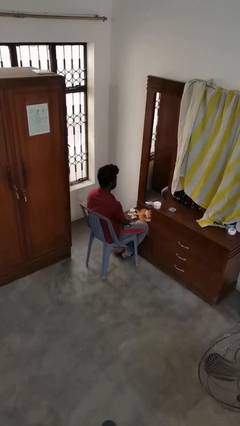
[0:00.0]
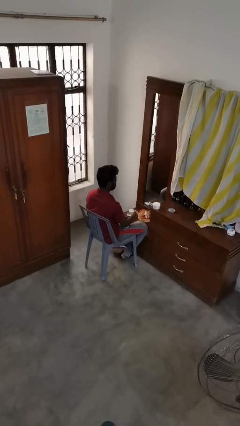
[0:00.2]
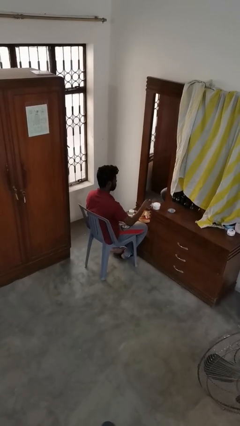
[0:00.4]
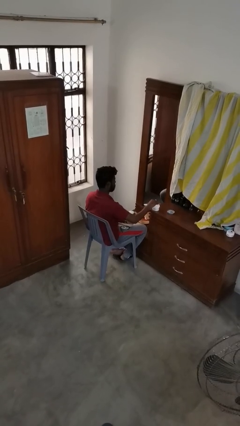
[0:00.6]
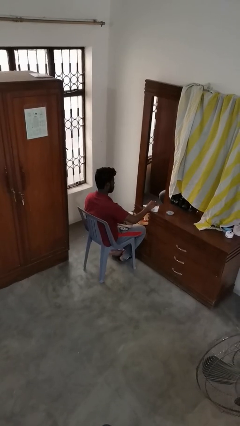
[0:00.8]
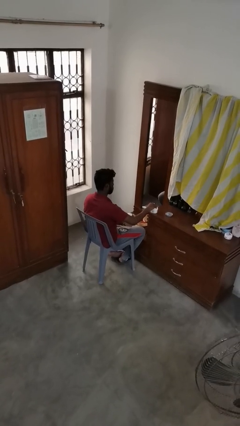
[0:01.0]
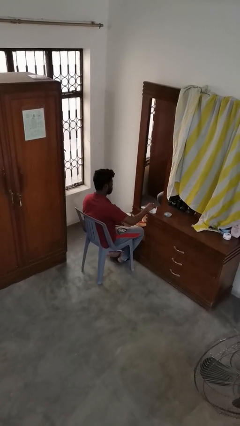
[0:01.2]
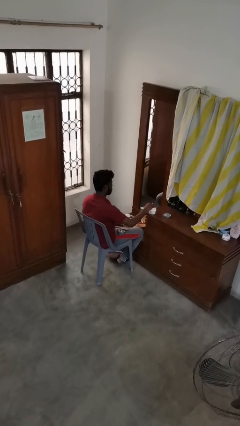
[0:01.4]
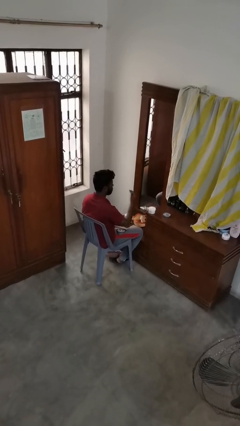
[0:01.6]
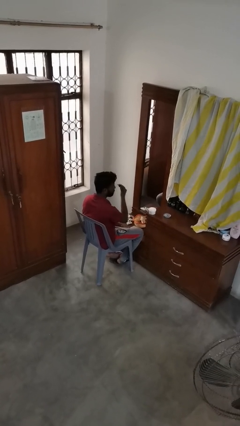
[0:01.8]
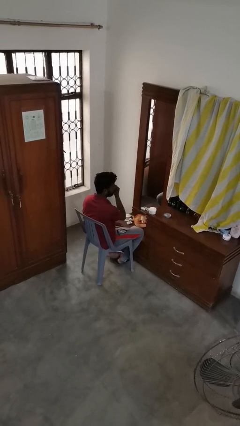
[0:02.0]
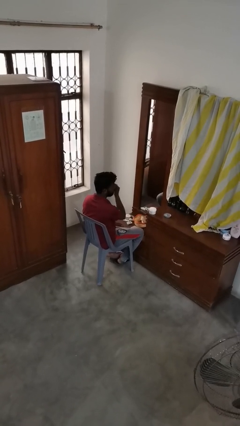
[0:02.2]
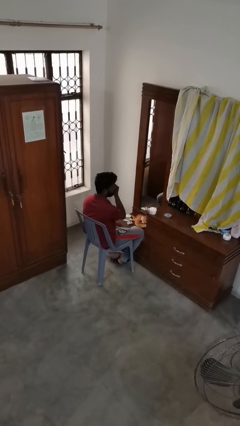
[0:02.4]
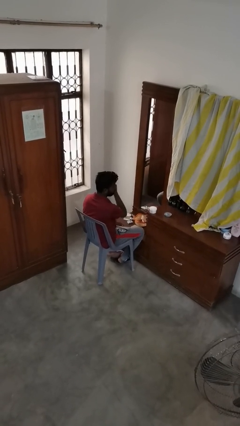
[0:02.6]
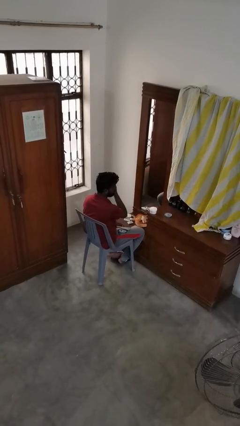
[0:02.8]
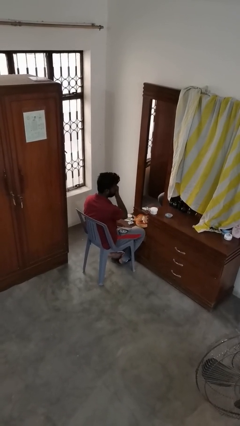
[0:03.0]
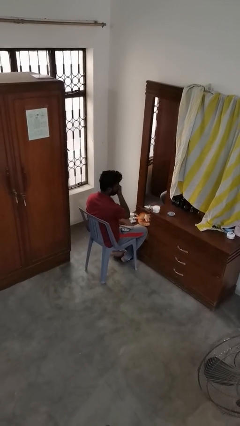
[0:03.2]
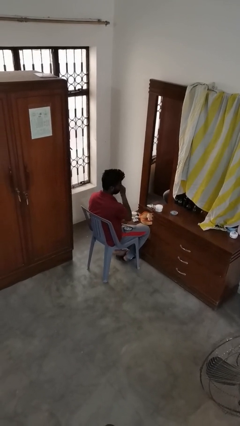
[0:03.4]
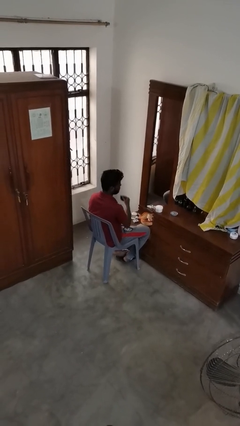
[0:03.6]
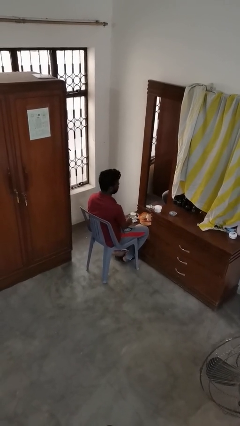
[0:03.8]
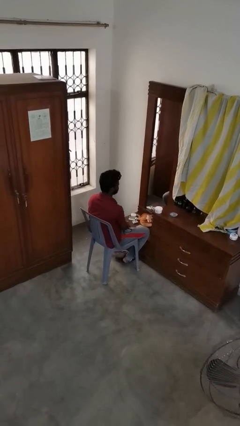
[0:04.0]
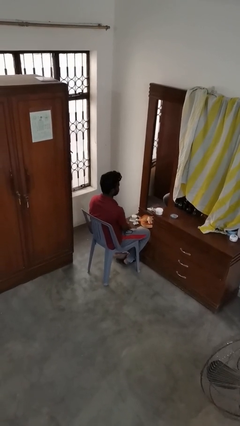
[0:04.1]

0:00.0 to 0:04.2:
person applies foundation makeup

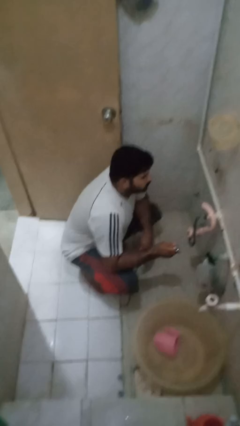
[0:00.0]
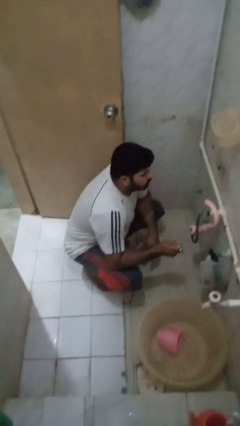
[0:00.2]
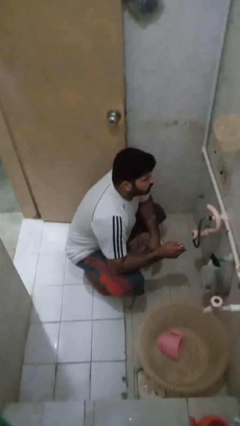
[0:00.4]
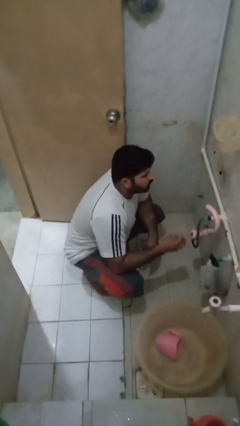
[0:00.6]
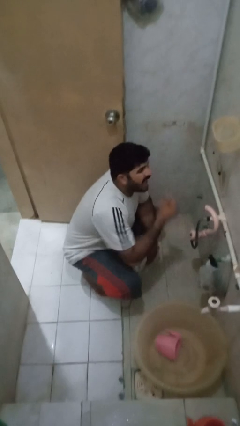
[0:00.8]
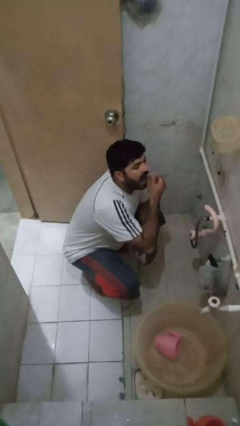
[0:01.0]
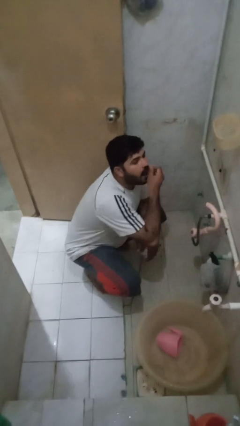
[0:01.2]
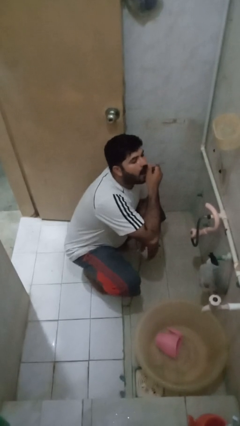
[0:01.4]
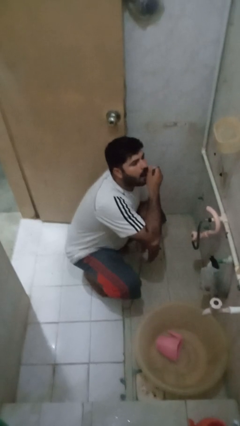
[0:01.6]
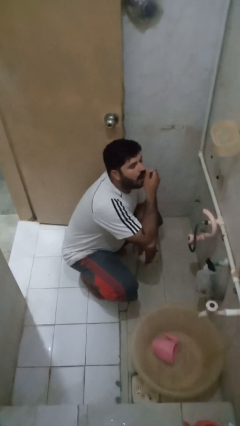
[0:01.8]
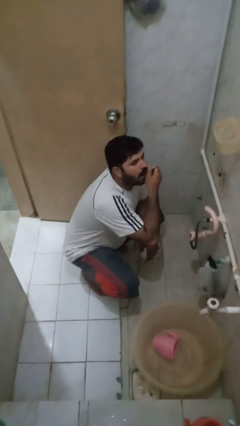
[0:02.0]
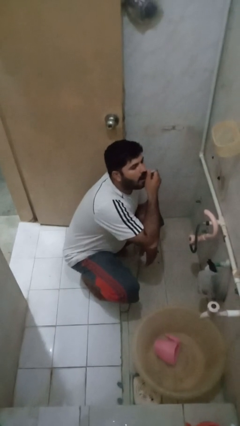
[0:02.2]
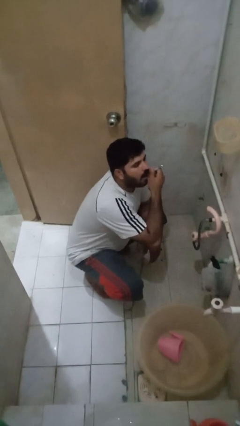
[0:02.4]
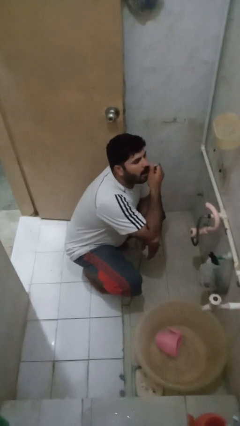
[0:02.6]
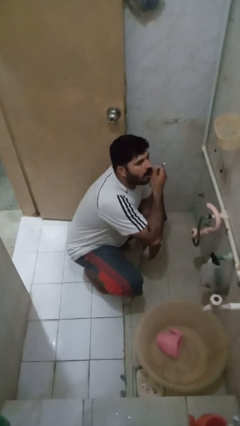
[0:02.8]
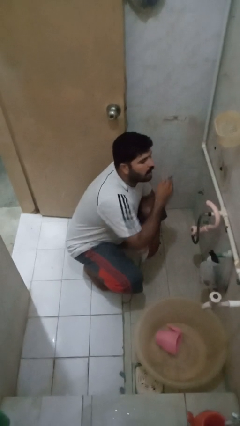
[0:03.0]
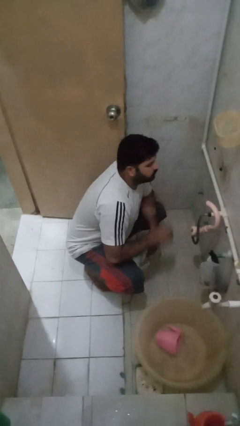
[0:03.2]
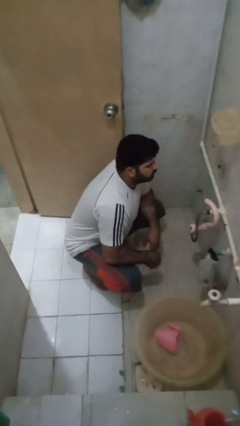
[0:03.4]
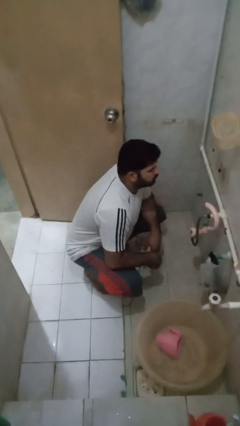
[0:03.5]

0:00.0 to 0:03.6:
person flosses

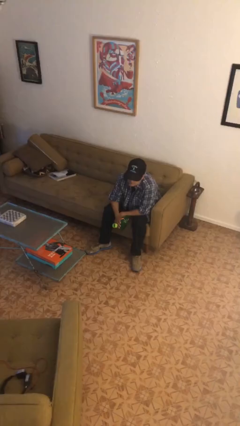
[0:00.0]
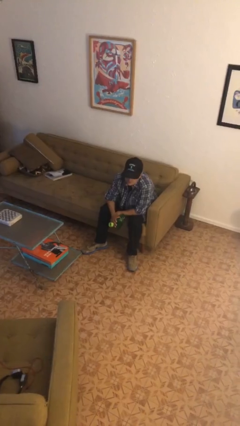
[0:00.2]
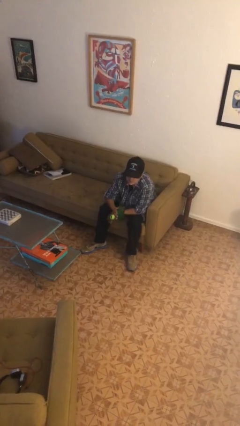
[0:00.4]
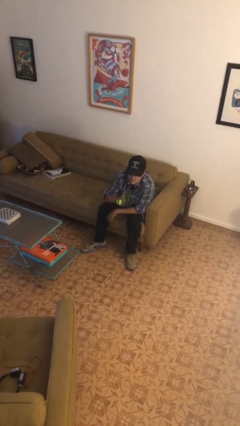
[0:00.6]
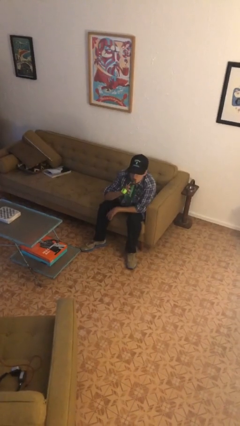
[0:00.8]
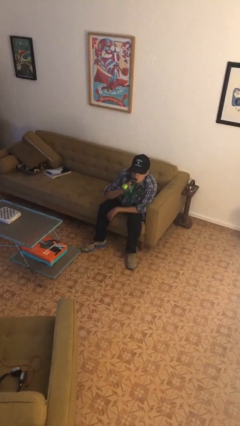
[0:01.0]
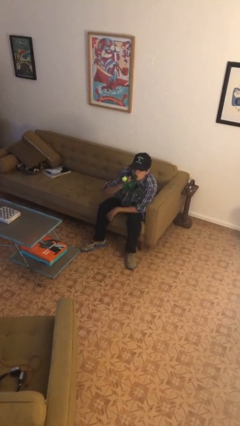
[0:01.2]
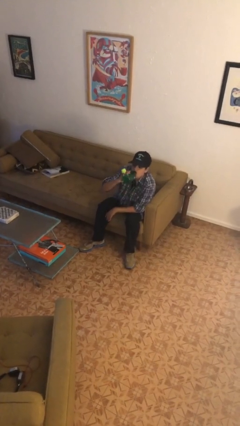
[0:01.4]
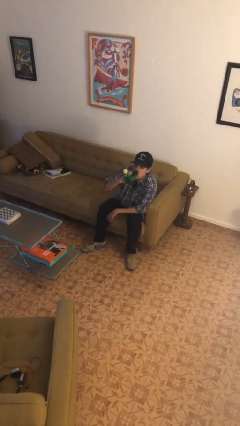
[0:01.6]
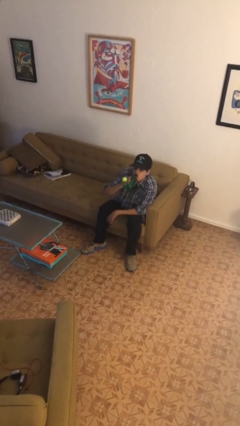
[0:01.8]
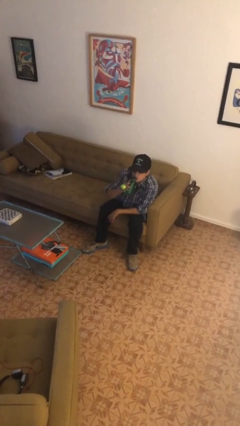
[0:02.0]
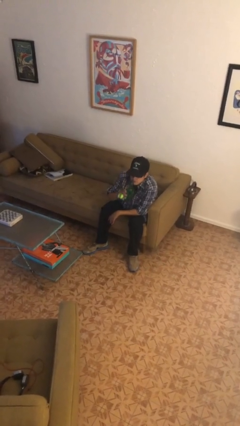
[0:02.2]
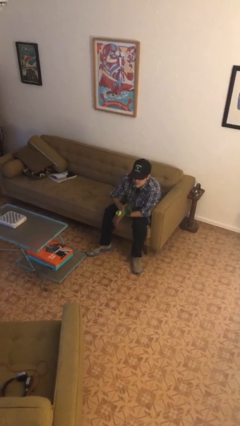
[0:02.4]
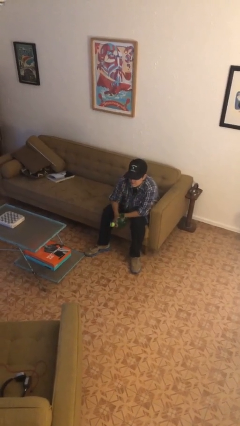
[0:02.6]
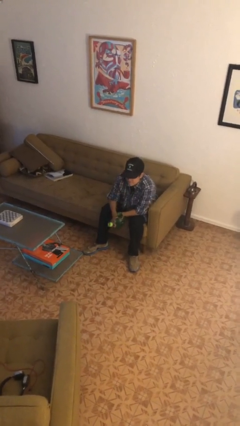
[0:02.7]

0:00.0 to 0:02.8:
person drinks from bottle

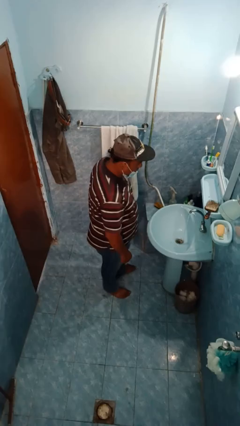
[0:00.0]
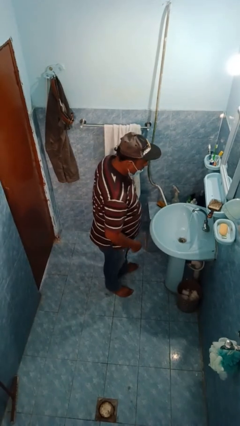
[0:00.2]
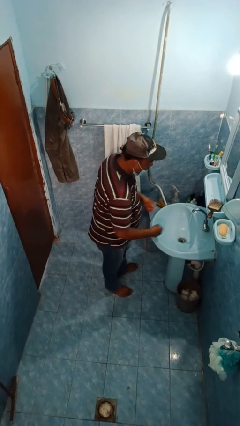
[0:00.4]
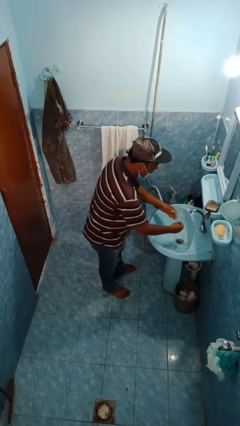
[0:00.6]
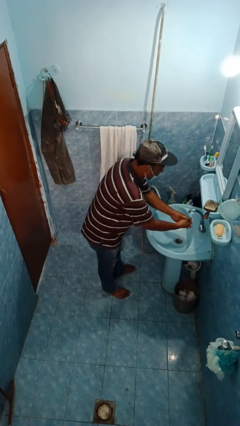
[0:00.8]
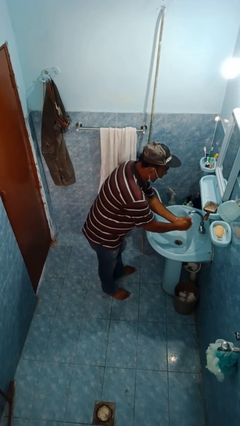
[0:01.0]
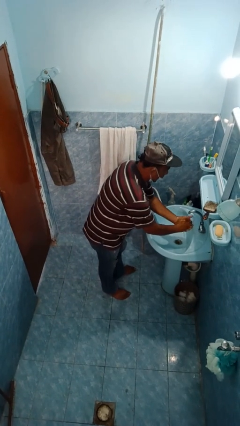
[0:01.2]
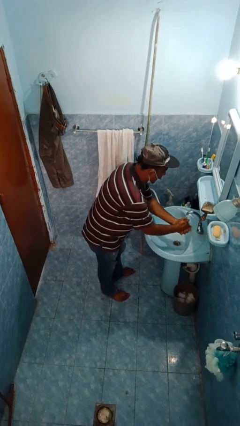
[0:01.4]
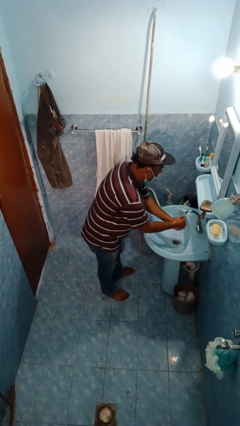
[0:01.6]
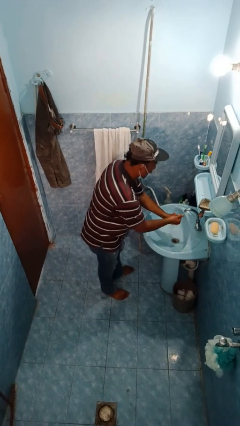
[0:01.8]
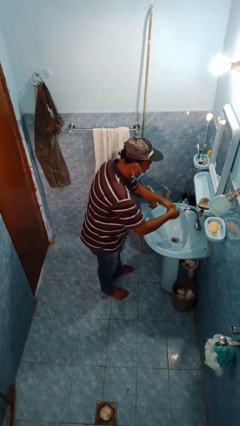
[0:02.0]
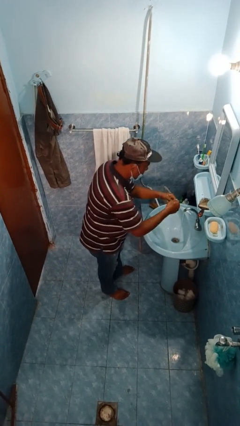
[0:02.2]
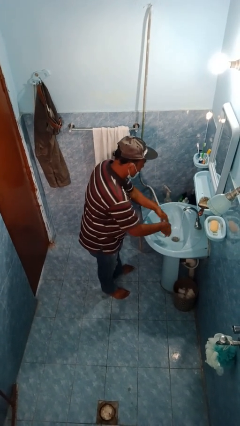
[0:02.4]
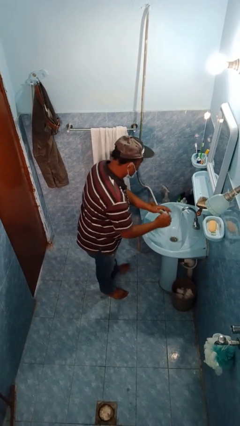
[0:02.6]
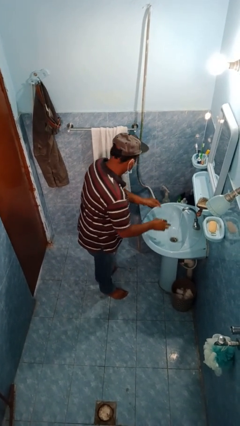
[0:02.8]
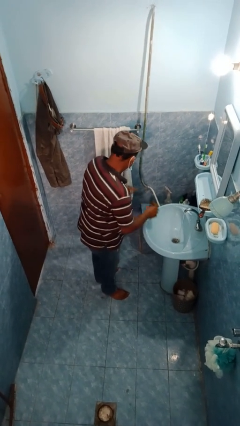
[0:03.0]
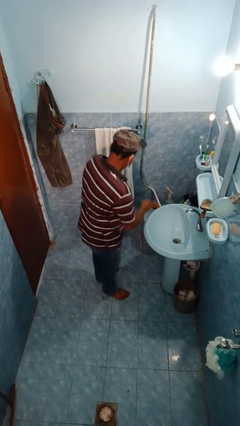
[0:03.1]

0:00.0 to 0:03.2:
person washes hands

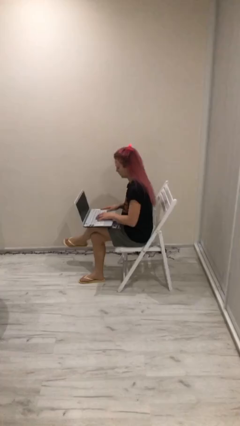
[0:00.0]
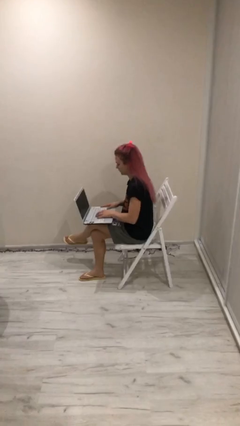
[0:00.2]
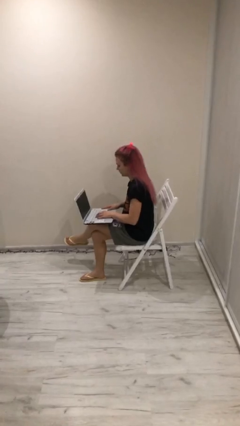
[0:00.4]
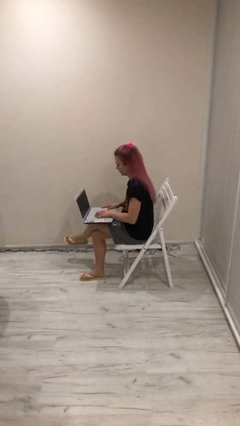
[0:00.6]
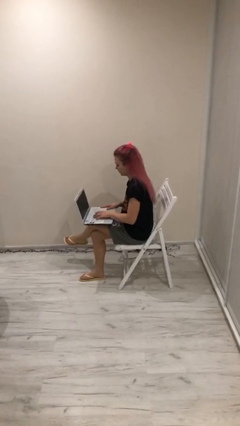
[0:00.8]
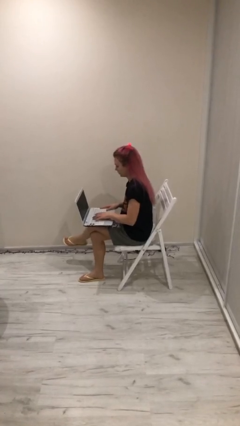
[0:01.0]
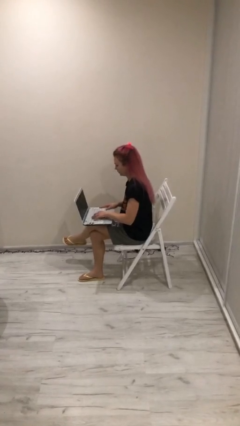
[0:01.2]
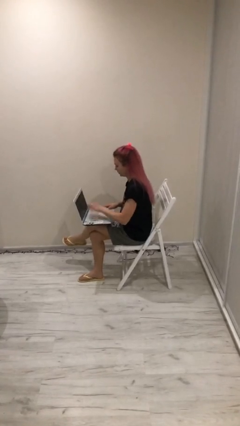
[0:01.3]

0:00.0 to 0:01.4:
person interacts with laptop

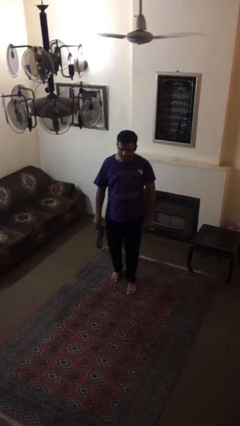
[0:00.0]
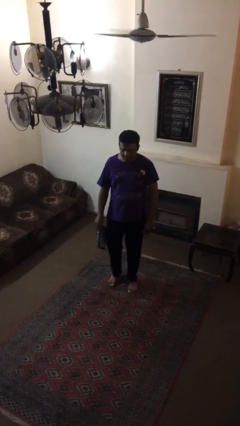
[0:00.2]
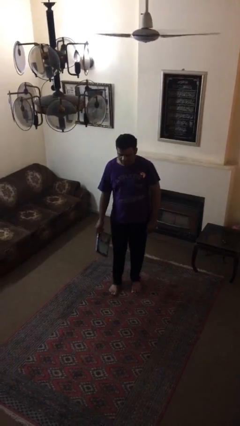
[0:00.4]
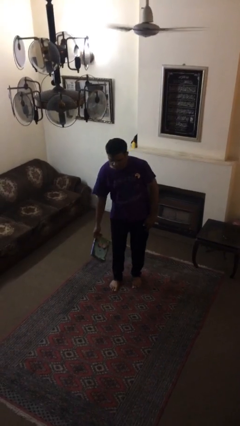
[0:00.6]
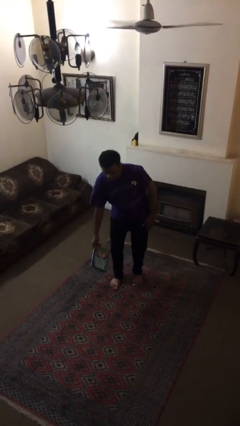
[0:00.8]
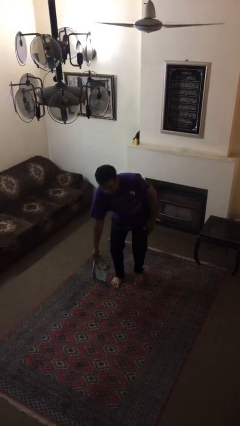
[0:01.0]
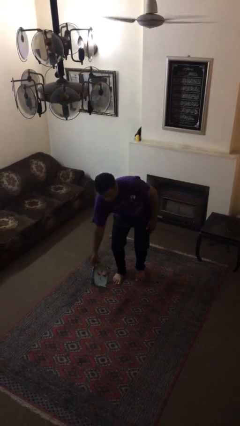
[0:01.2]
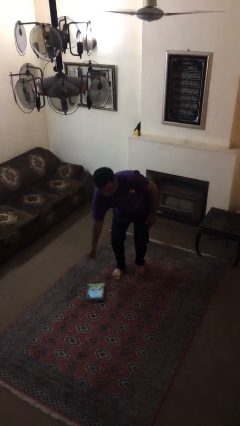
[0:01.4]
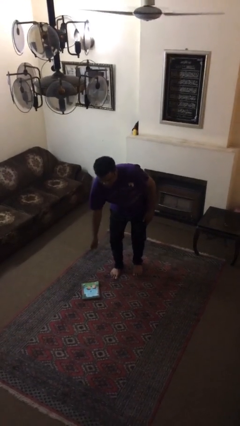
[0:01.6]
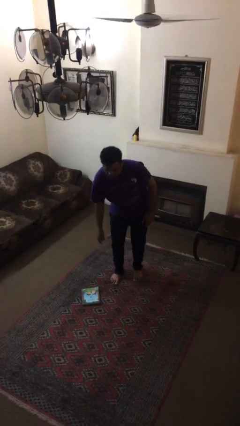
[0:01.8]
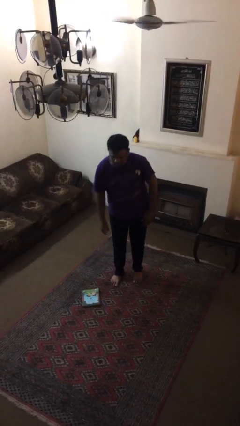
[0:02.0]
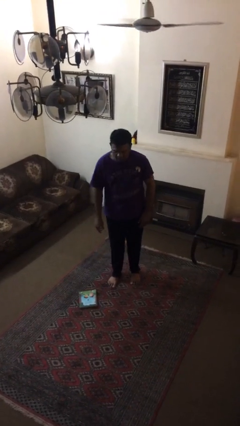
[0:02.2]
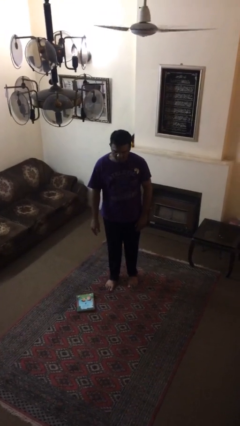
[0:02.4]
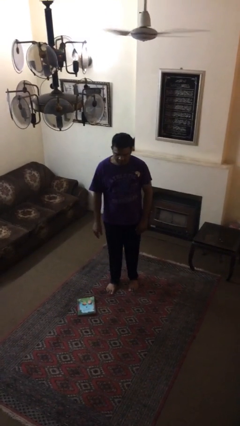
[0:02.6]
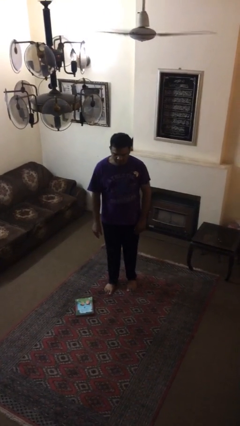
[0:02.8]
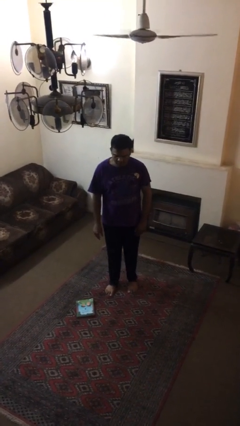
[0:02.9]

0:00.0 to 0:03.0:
person puts down object on floor
